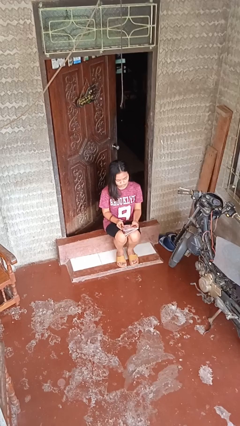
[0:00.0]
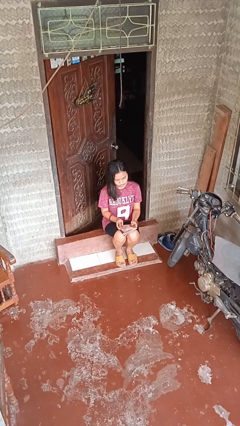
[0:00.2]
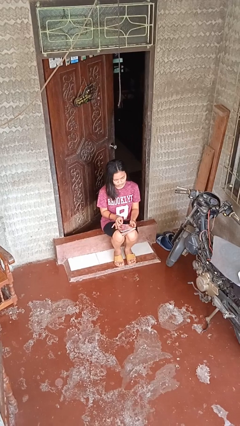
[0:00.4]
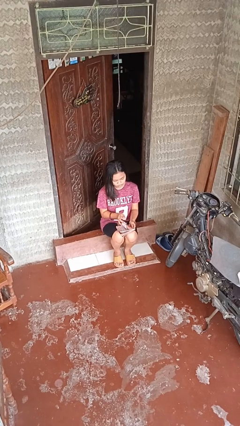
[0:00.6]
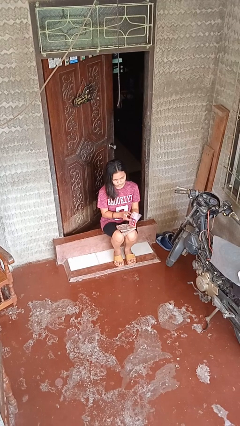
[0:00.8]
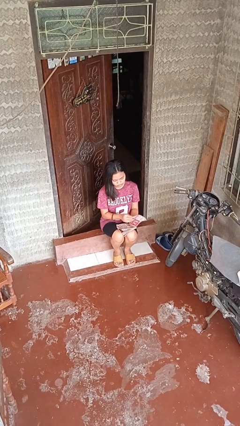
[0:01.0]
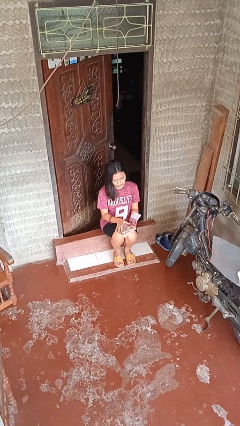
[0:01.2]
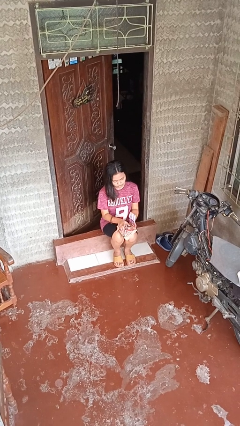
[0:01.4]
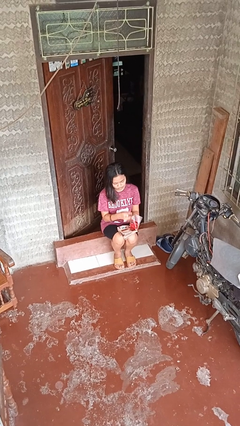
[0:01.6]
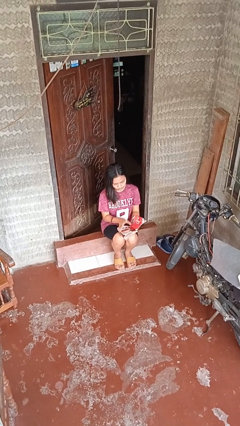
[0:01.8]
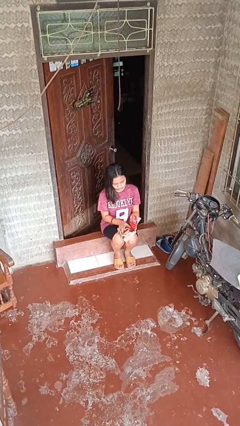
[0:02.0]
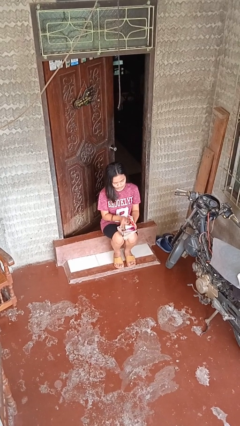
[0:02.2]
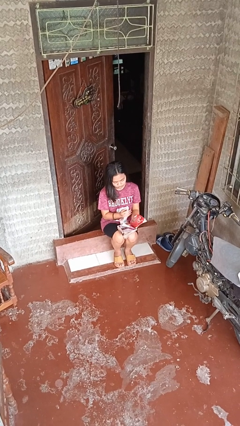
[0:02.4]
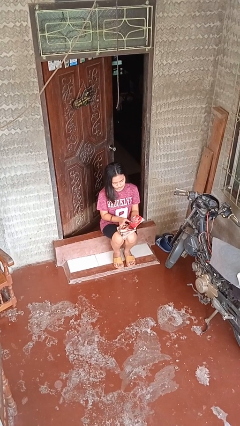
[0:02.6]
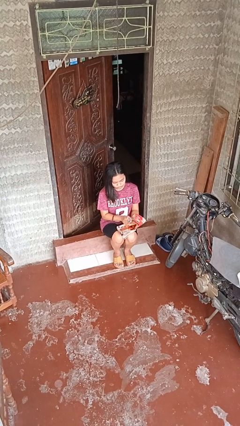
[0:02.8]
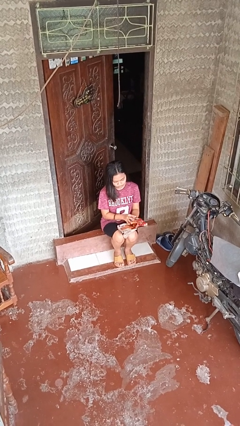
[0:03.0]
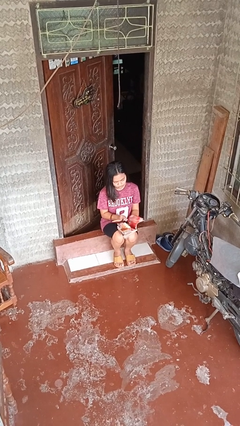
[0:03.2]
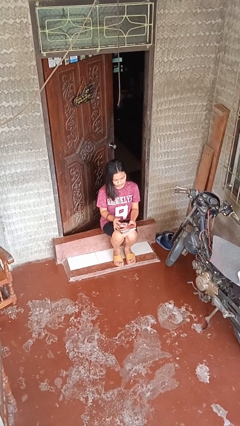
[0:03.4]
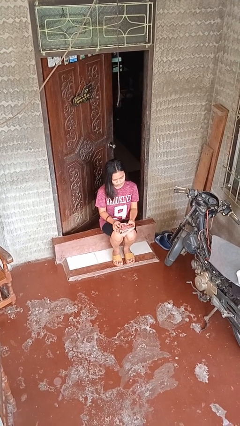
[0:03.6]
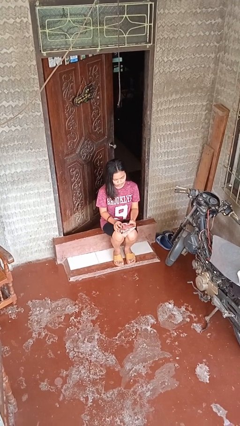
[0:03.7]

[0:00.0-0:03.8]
person reads magazine

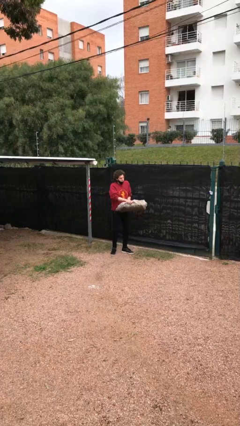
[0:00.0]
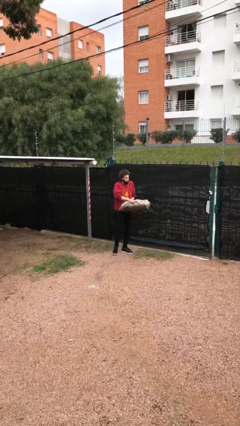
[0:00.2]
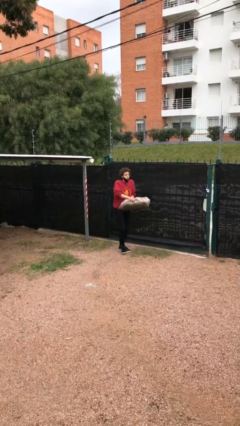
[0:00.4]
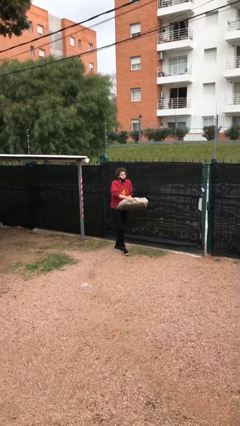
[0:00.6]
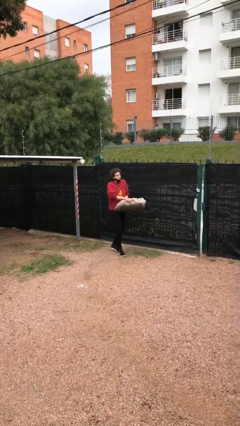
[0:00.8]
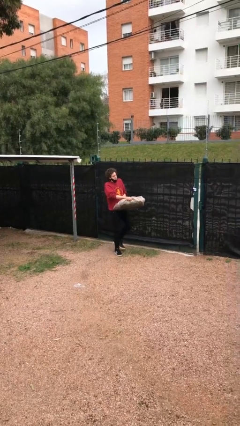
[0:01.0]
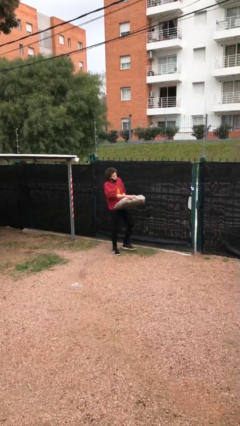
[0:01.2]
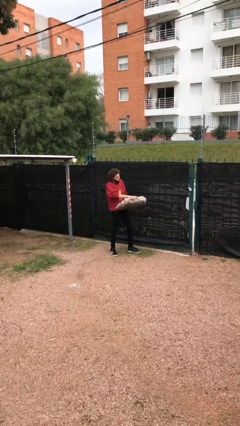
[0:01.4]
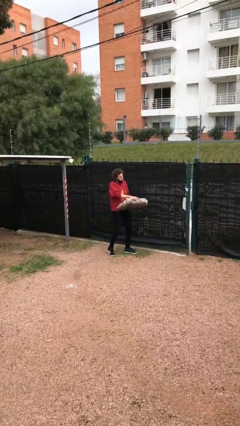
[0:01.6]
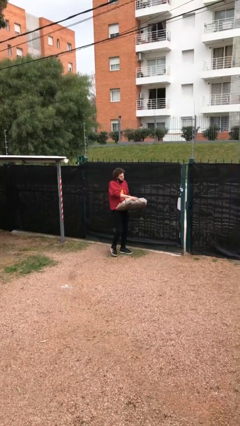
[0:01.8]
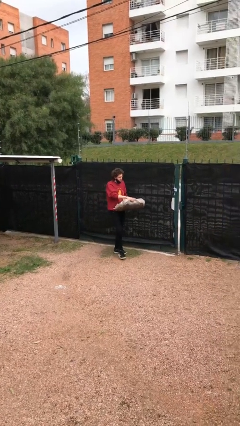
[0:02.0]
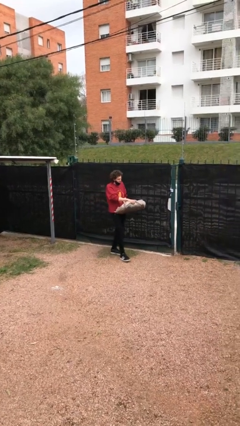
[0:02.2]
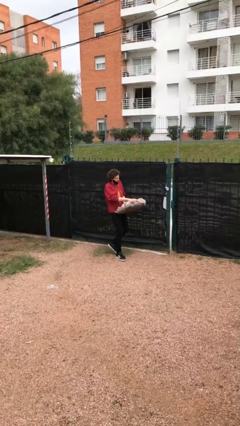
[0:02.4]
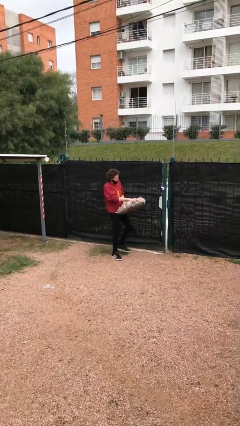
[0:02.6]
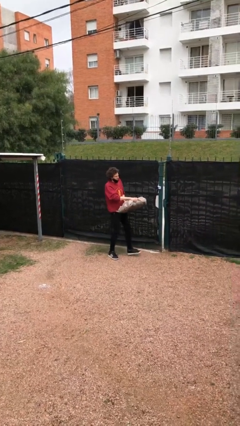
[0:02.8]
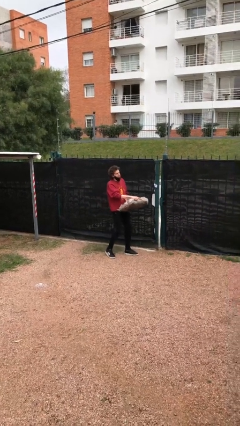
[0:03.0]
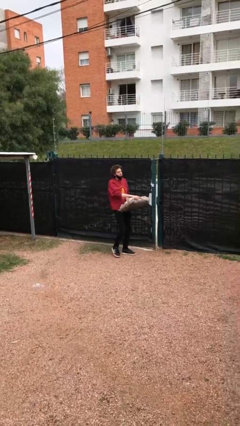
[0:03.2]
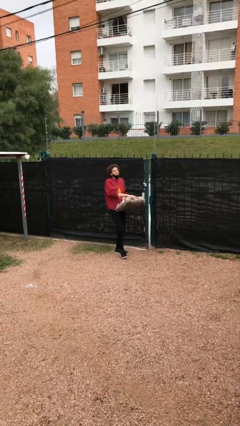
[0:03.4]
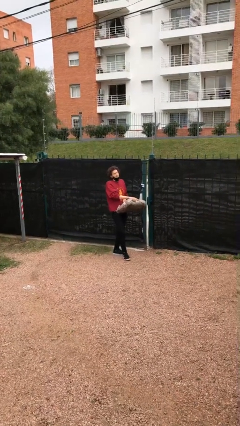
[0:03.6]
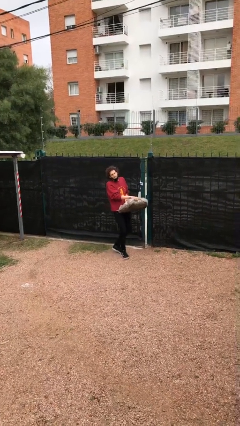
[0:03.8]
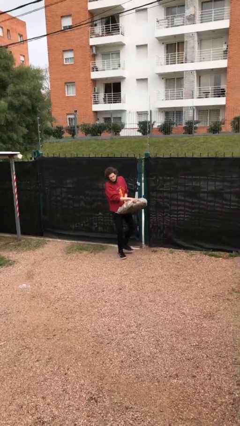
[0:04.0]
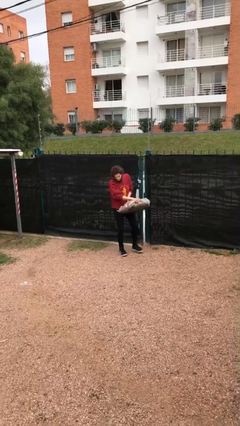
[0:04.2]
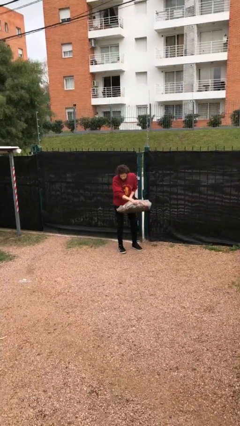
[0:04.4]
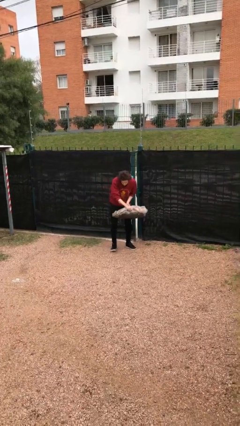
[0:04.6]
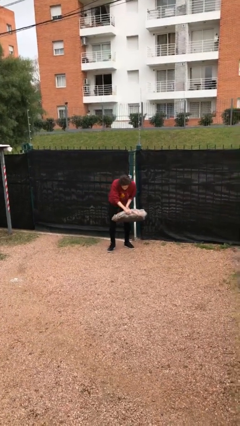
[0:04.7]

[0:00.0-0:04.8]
person carries heavy object

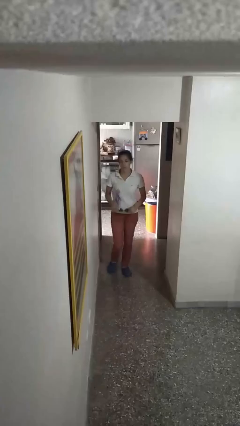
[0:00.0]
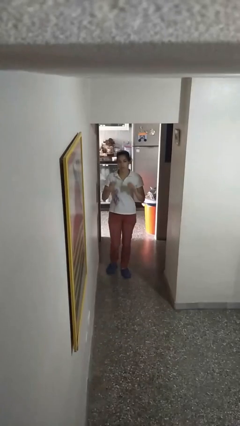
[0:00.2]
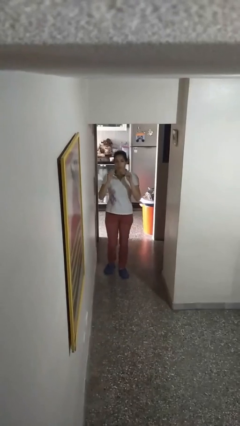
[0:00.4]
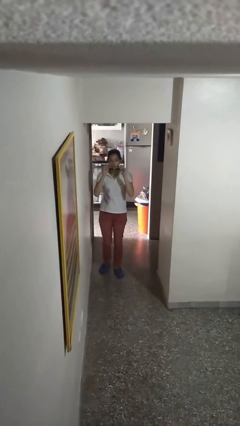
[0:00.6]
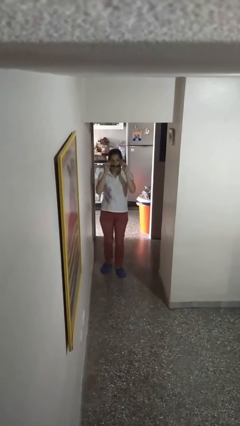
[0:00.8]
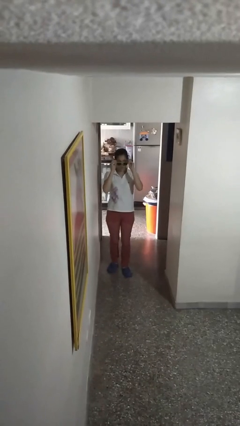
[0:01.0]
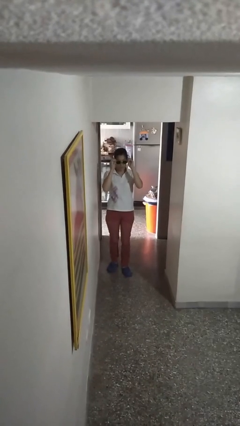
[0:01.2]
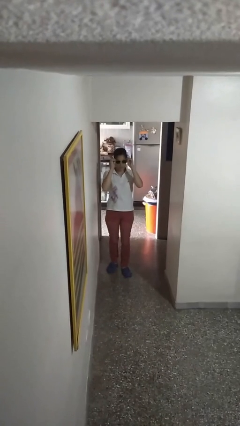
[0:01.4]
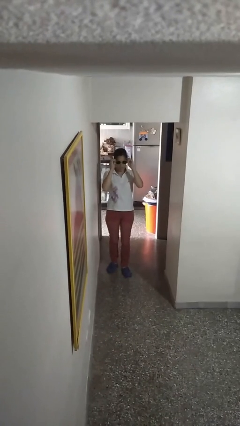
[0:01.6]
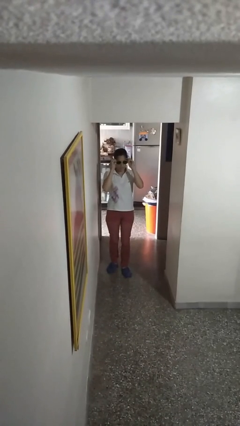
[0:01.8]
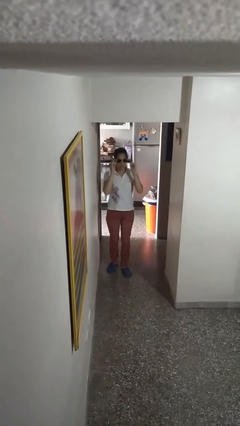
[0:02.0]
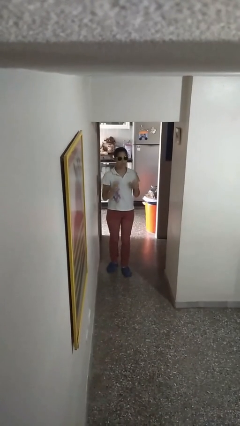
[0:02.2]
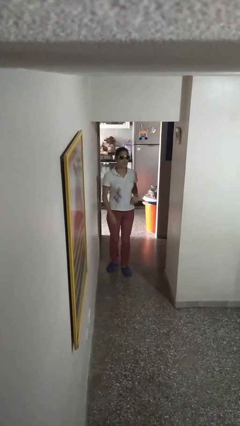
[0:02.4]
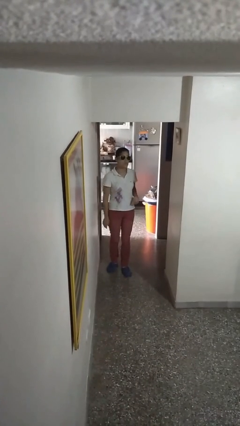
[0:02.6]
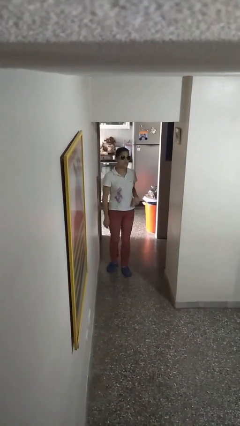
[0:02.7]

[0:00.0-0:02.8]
person puts on sunglasses

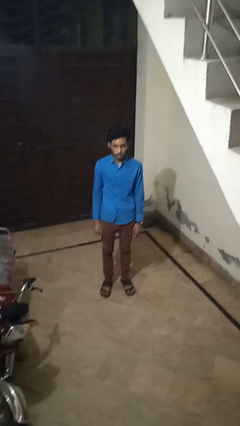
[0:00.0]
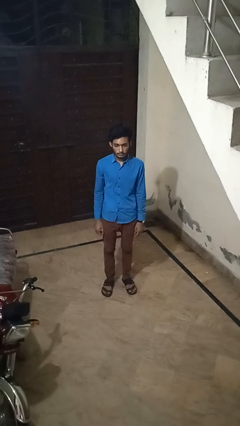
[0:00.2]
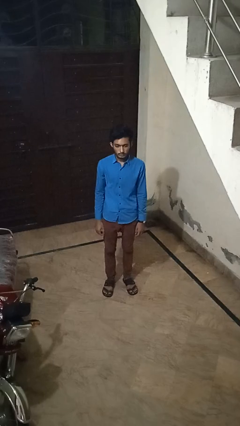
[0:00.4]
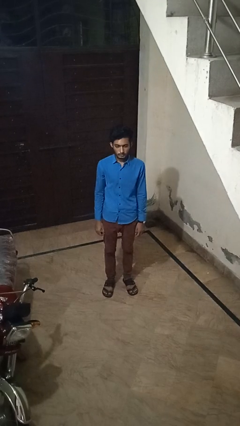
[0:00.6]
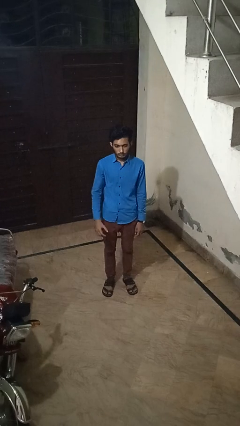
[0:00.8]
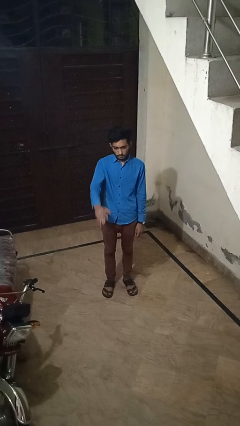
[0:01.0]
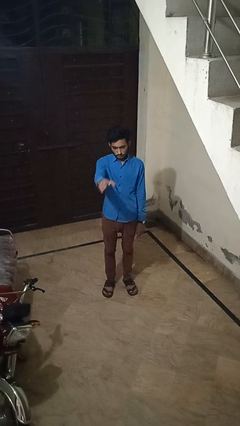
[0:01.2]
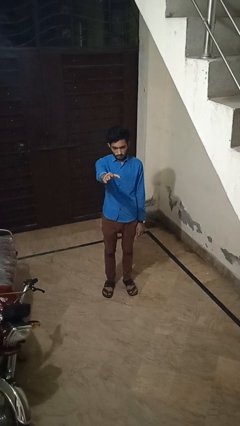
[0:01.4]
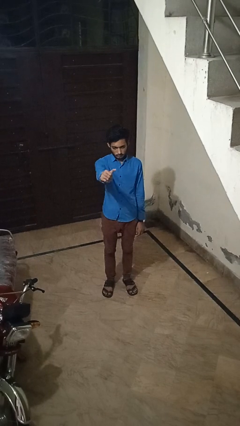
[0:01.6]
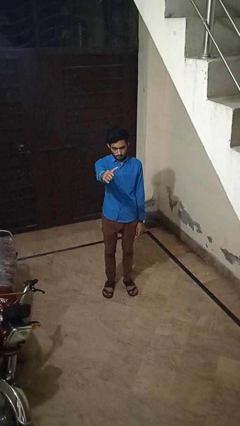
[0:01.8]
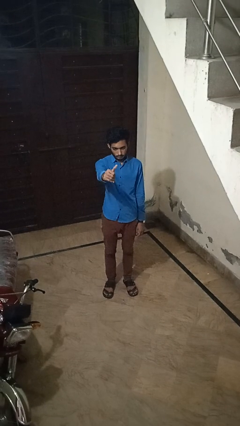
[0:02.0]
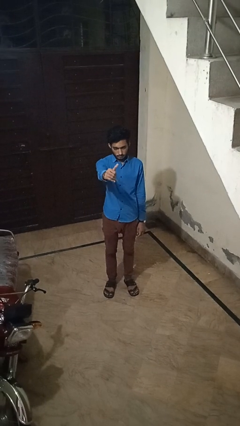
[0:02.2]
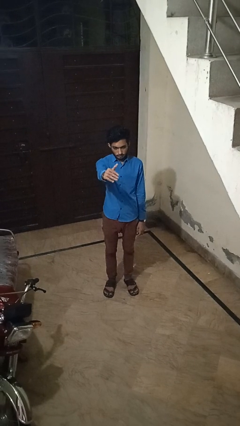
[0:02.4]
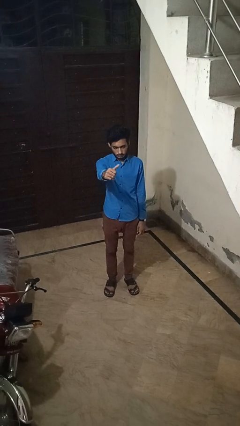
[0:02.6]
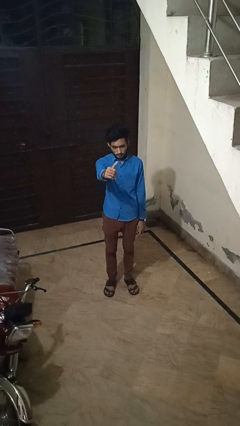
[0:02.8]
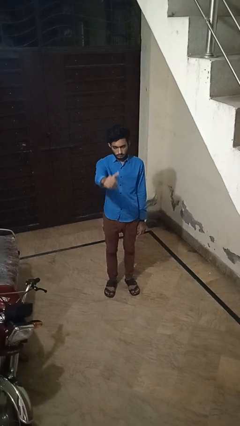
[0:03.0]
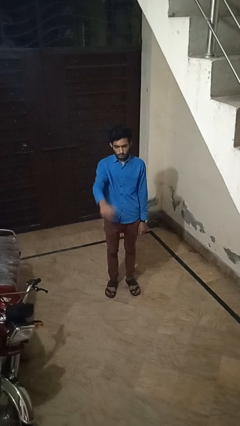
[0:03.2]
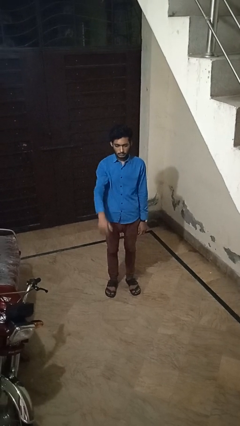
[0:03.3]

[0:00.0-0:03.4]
person gestures come here

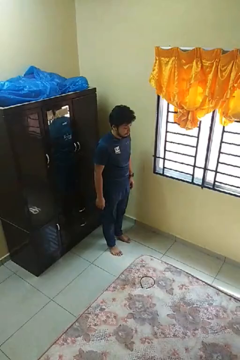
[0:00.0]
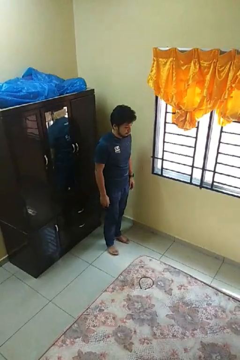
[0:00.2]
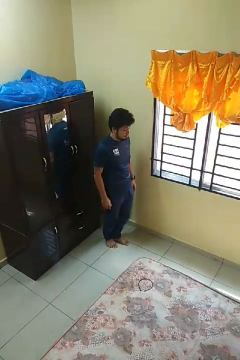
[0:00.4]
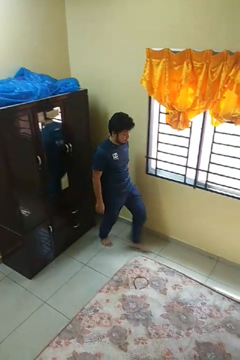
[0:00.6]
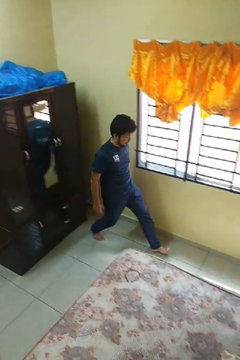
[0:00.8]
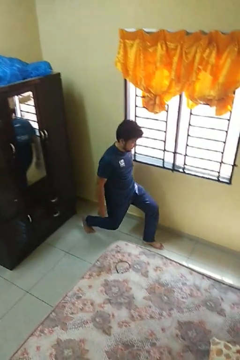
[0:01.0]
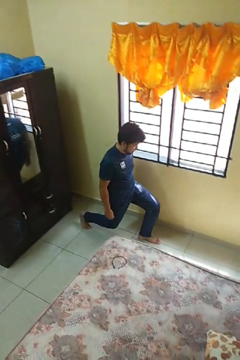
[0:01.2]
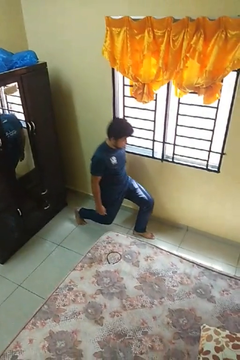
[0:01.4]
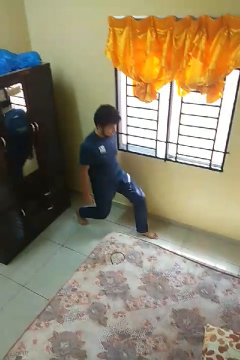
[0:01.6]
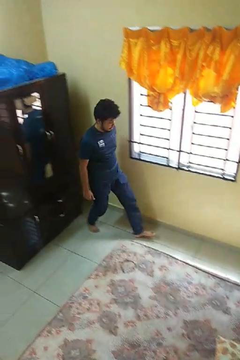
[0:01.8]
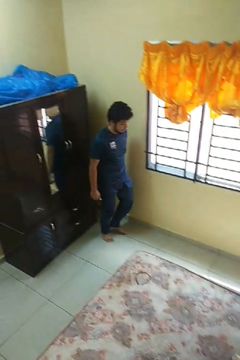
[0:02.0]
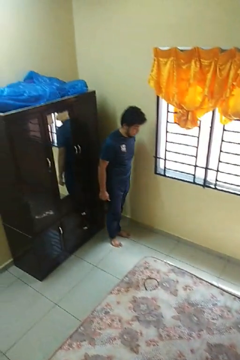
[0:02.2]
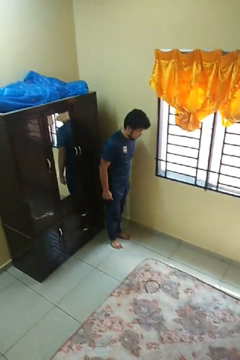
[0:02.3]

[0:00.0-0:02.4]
person exercises with lunges

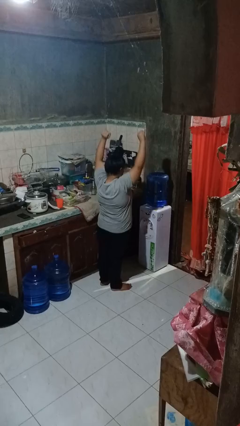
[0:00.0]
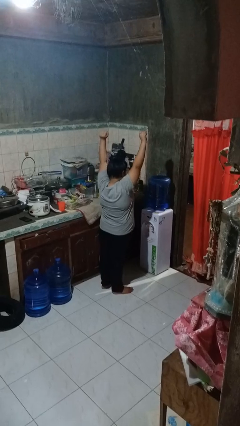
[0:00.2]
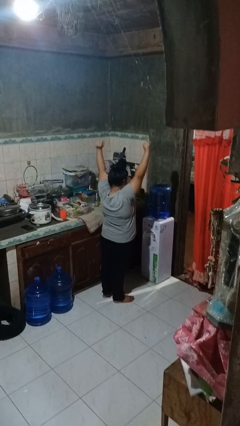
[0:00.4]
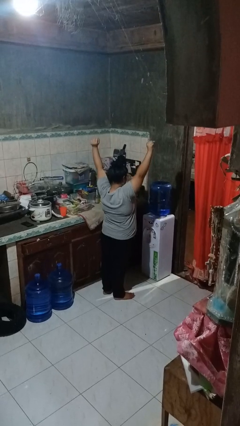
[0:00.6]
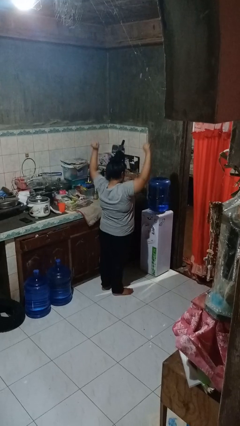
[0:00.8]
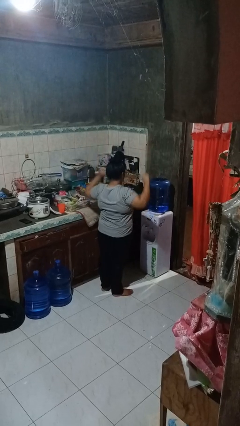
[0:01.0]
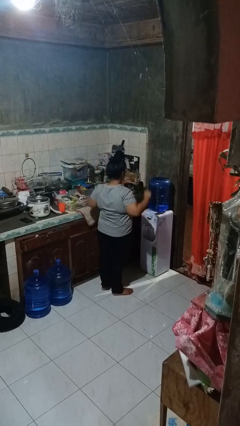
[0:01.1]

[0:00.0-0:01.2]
person stretches arms over head
